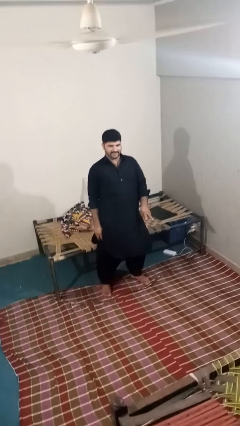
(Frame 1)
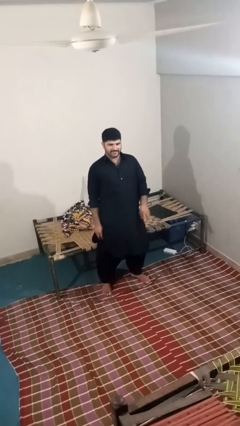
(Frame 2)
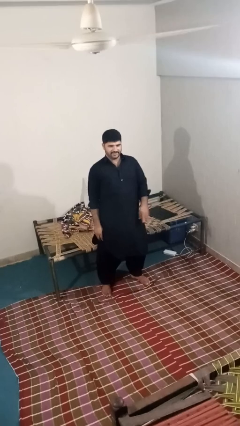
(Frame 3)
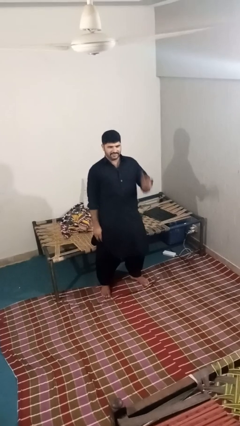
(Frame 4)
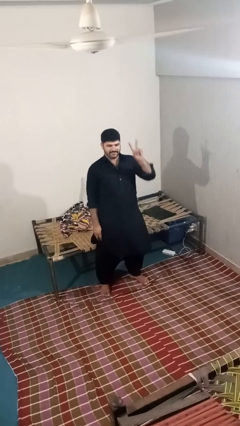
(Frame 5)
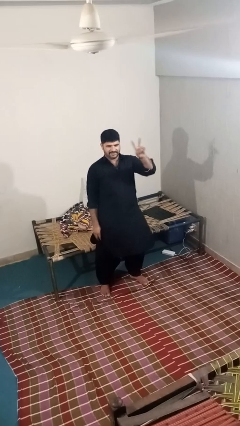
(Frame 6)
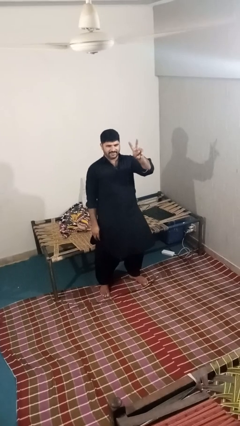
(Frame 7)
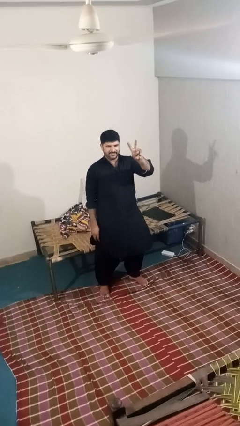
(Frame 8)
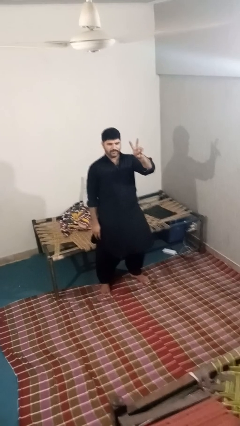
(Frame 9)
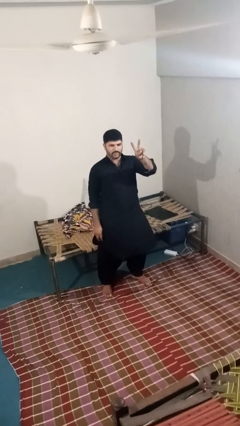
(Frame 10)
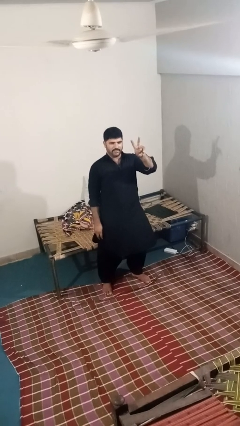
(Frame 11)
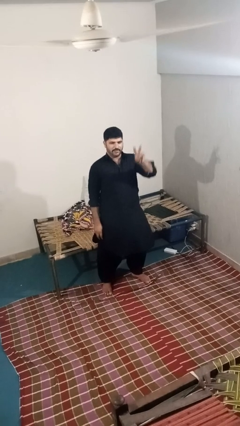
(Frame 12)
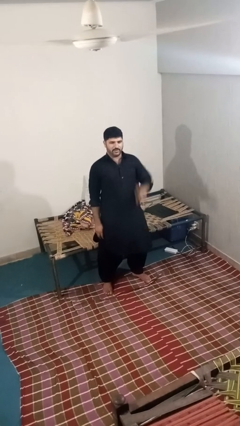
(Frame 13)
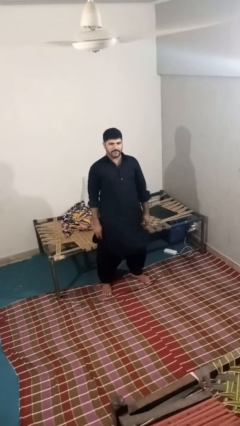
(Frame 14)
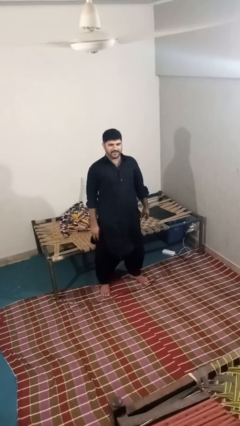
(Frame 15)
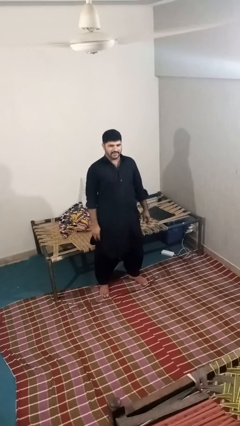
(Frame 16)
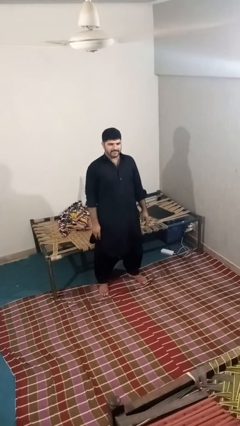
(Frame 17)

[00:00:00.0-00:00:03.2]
person gestures peace

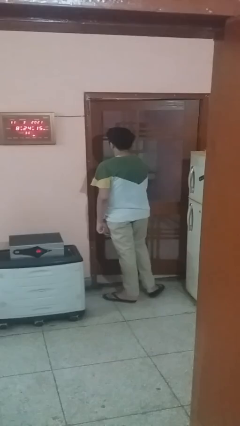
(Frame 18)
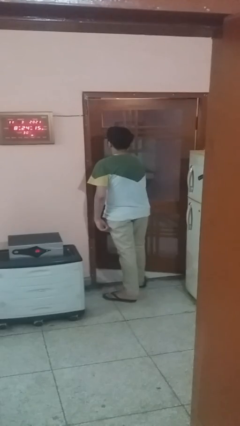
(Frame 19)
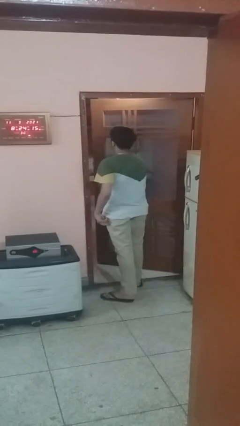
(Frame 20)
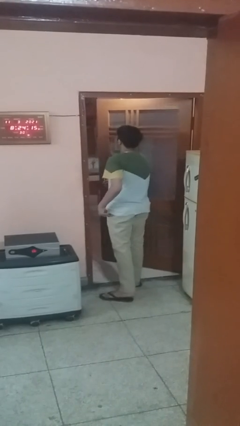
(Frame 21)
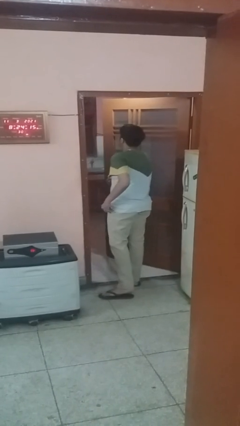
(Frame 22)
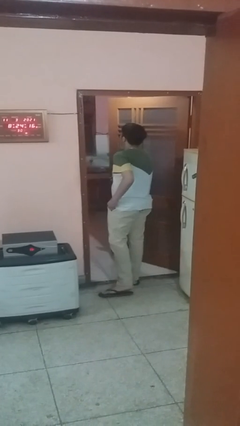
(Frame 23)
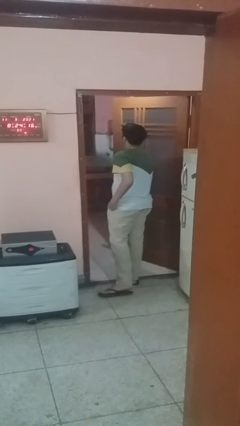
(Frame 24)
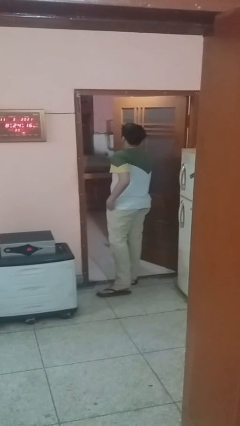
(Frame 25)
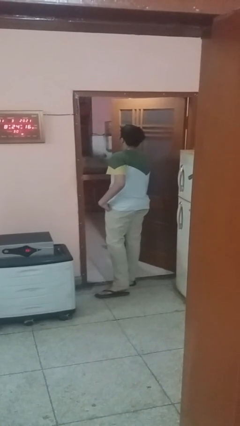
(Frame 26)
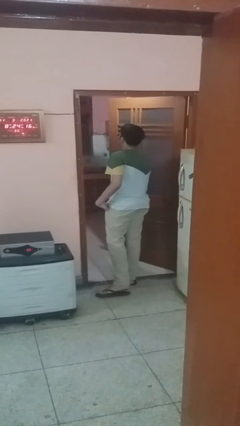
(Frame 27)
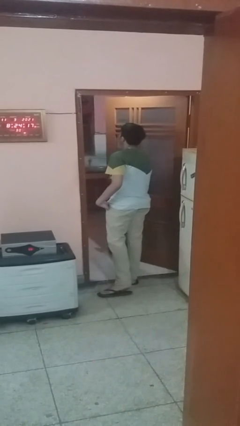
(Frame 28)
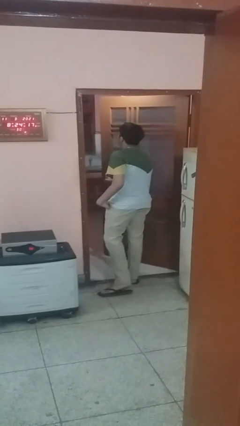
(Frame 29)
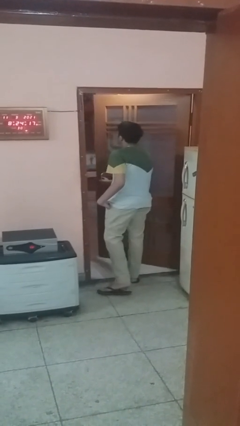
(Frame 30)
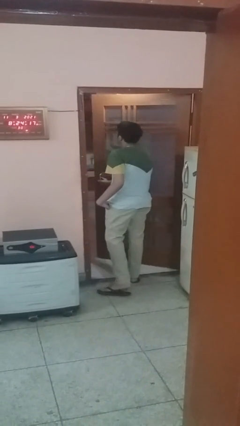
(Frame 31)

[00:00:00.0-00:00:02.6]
person opens facility door

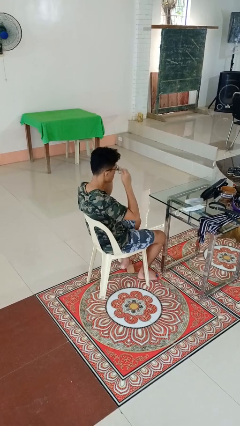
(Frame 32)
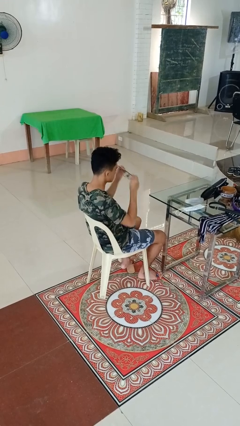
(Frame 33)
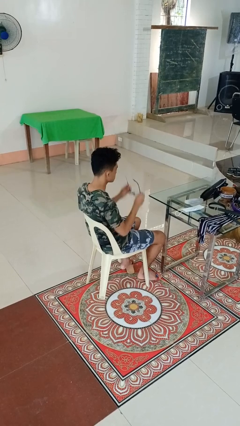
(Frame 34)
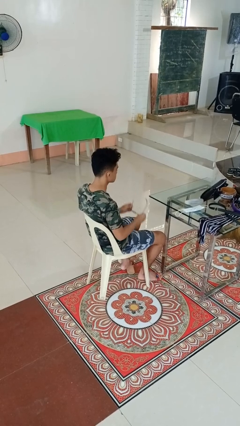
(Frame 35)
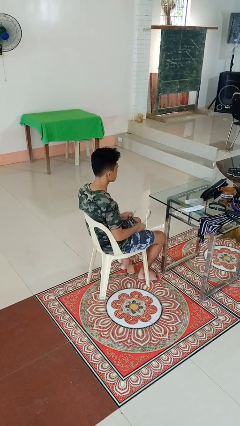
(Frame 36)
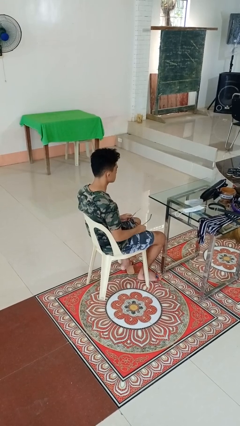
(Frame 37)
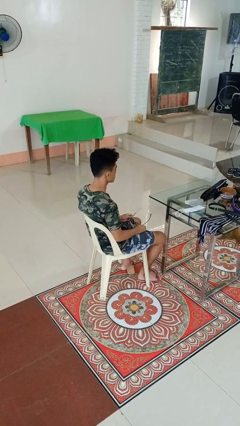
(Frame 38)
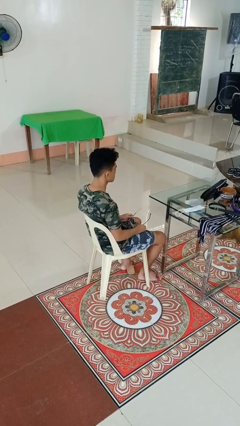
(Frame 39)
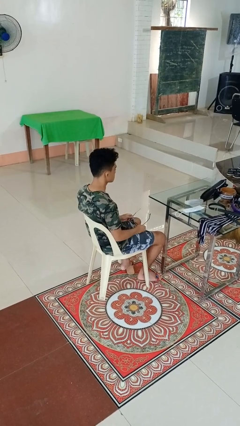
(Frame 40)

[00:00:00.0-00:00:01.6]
person takes off glasses

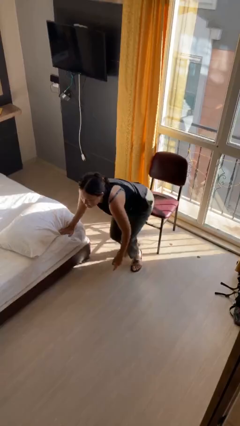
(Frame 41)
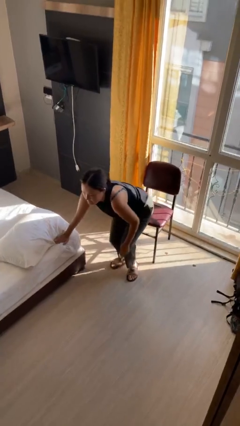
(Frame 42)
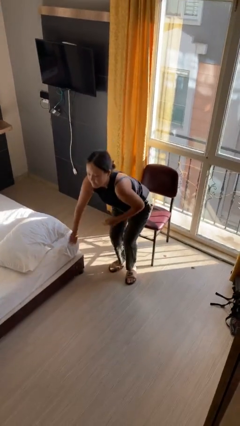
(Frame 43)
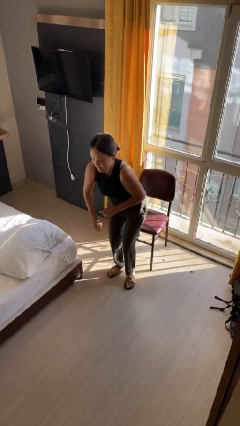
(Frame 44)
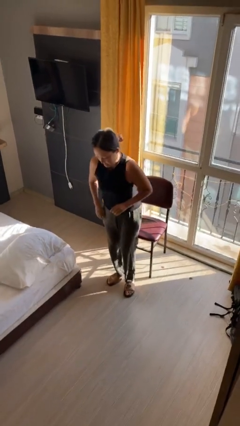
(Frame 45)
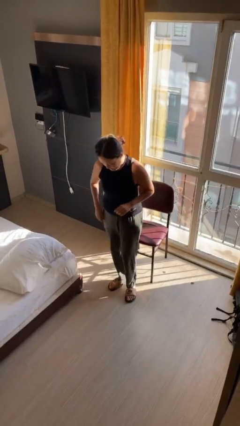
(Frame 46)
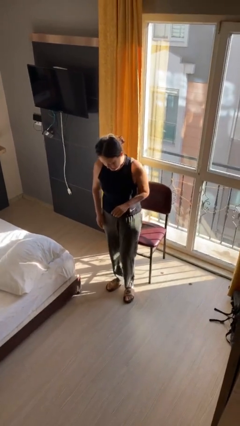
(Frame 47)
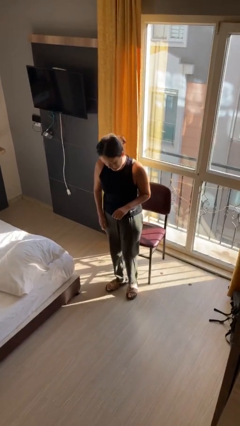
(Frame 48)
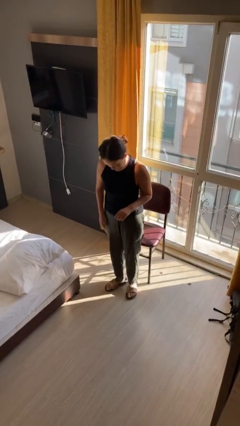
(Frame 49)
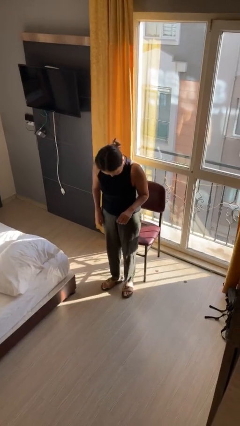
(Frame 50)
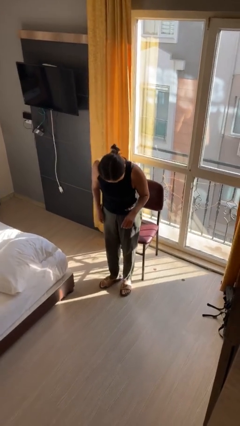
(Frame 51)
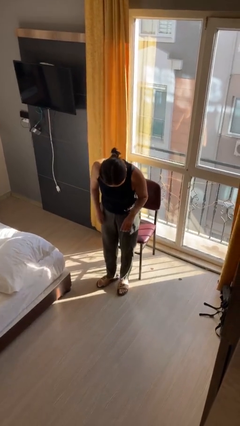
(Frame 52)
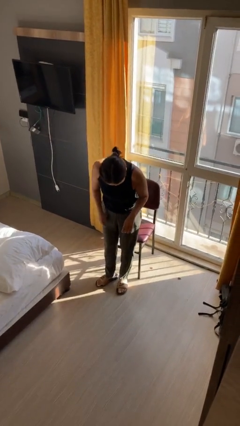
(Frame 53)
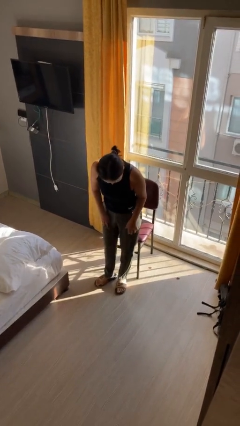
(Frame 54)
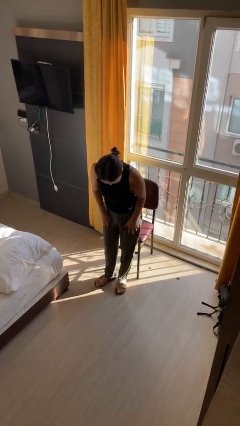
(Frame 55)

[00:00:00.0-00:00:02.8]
person stands up from floor

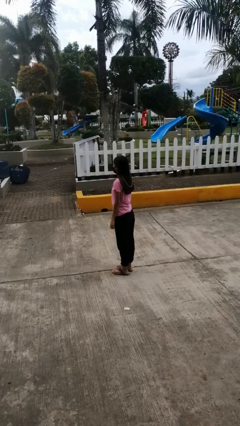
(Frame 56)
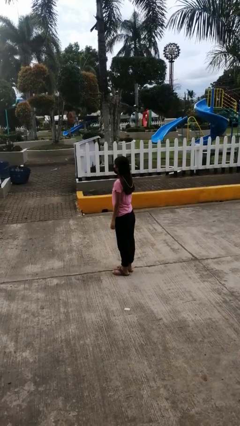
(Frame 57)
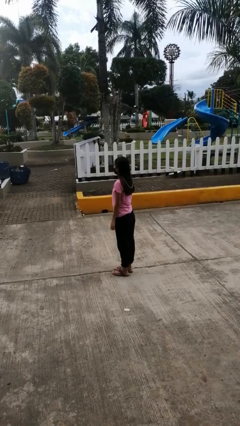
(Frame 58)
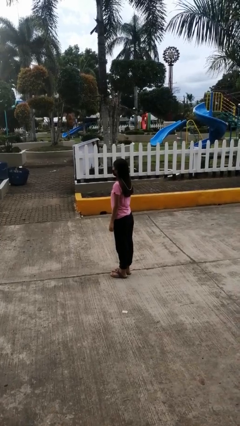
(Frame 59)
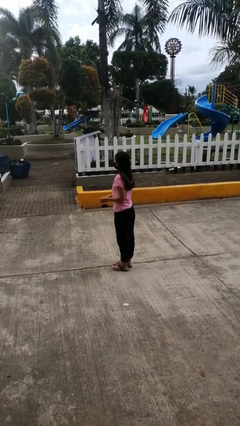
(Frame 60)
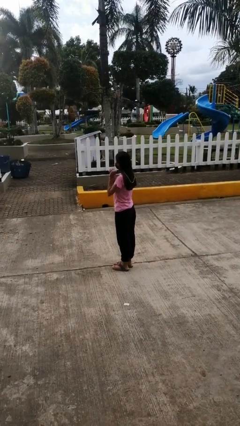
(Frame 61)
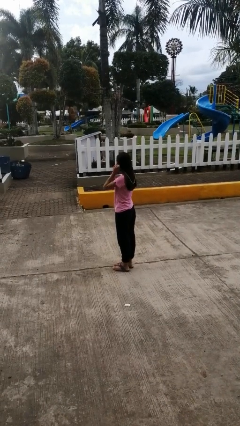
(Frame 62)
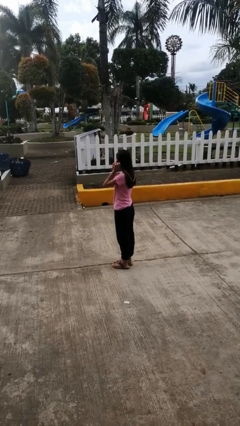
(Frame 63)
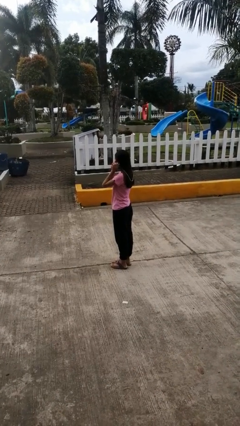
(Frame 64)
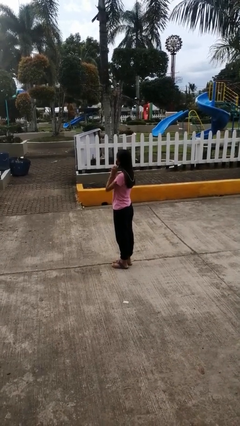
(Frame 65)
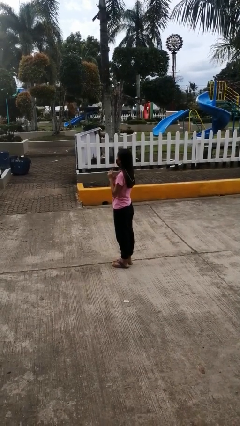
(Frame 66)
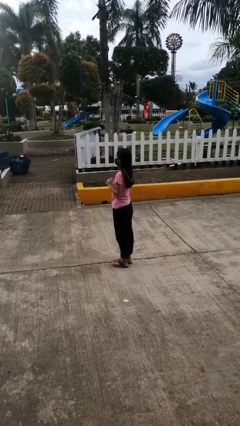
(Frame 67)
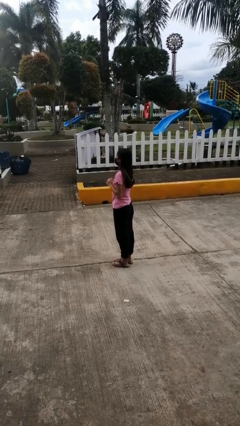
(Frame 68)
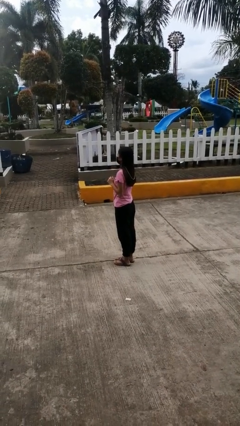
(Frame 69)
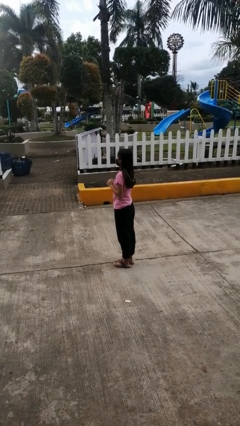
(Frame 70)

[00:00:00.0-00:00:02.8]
person puts on earrings

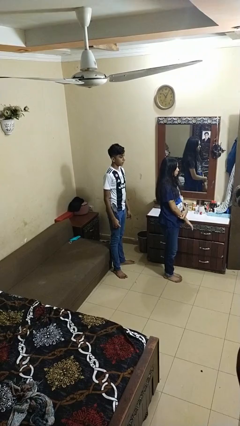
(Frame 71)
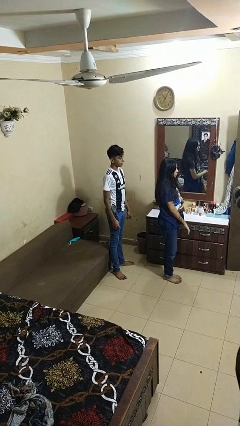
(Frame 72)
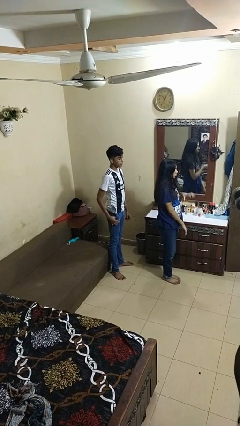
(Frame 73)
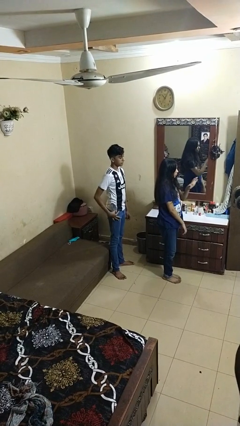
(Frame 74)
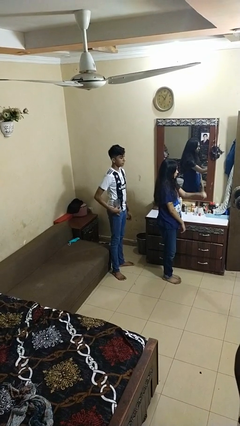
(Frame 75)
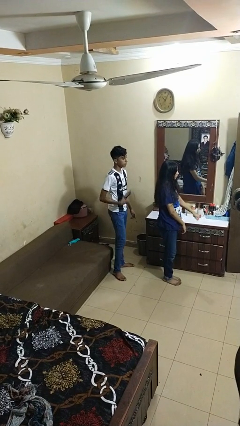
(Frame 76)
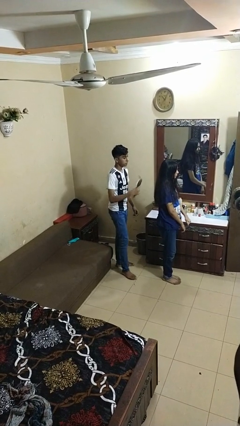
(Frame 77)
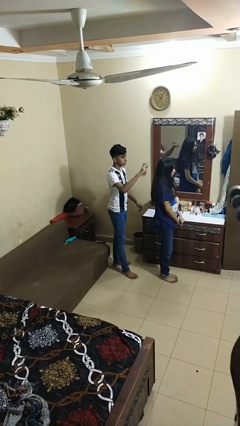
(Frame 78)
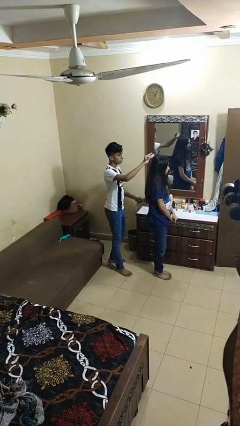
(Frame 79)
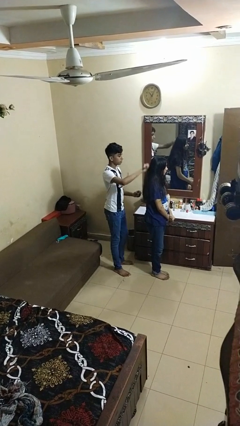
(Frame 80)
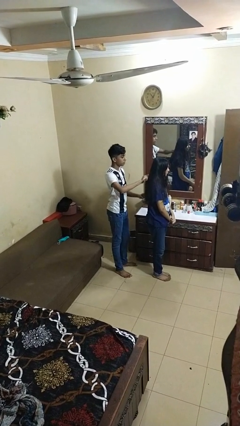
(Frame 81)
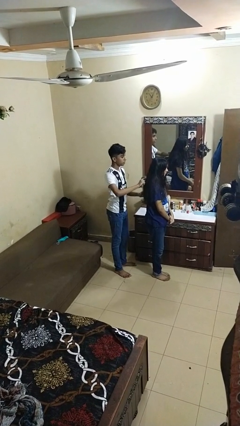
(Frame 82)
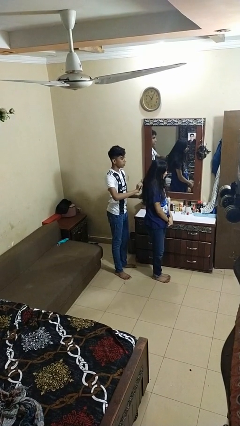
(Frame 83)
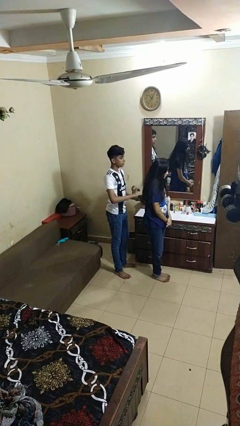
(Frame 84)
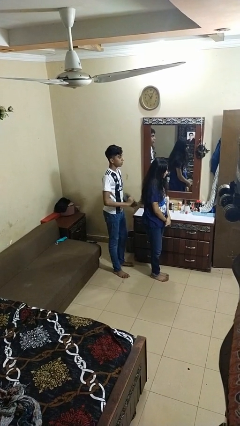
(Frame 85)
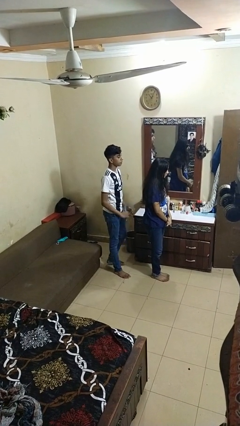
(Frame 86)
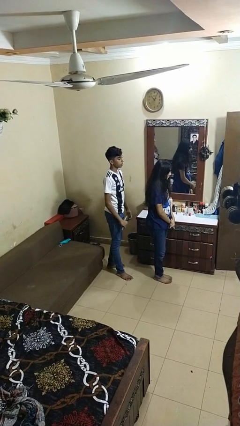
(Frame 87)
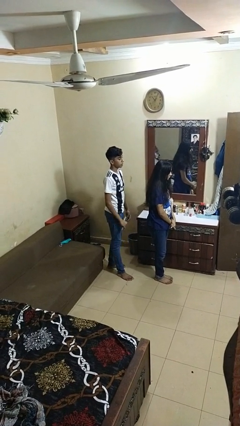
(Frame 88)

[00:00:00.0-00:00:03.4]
person brushes hair of person

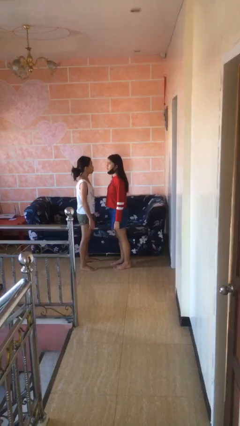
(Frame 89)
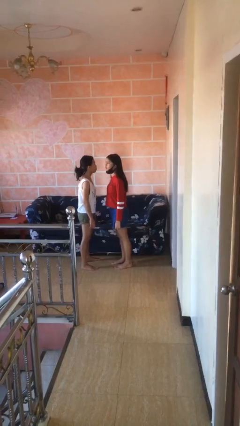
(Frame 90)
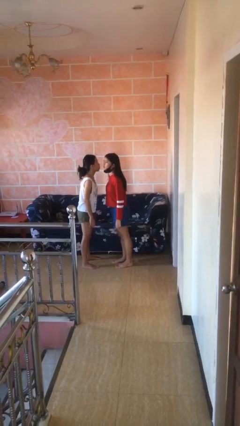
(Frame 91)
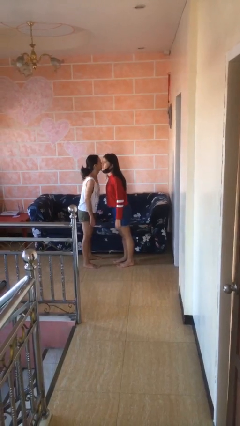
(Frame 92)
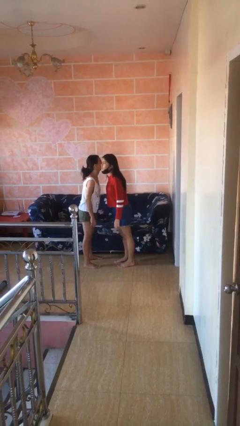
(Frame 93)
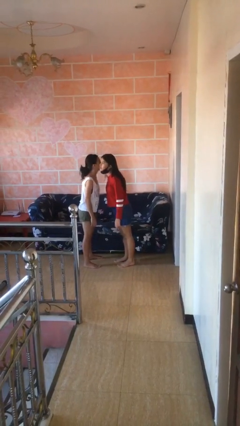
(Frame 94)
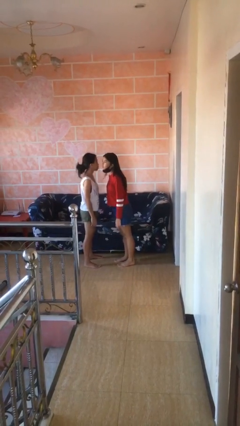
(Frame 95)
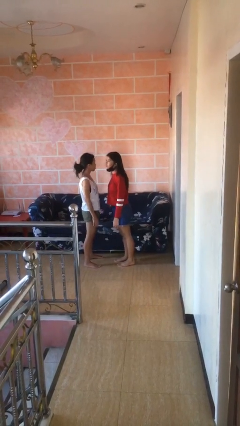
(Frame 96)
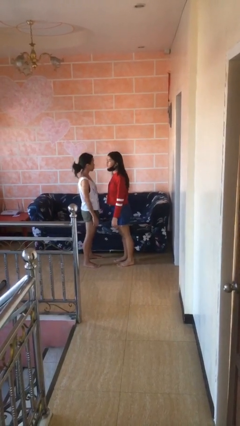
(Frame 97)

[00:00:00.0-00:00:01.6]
person kisses cheek of person
